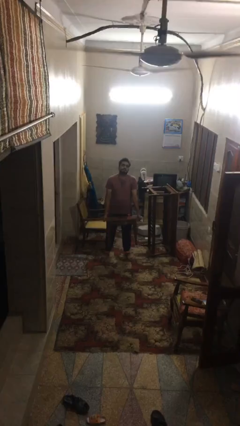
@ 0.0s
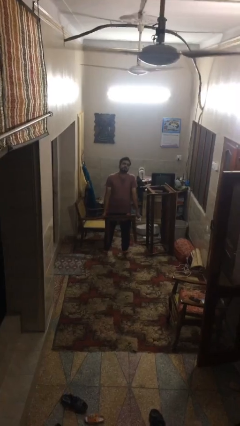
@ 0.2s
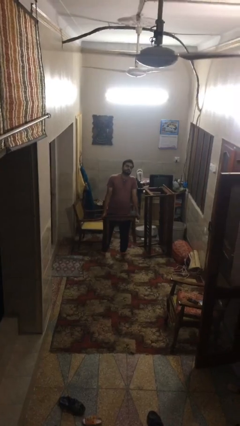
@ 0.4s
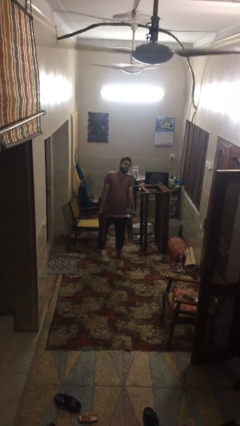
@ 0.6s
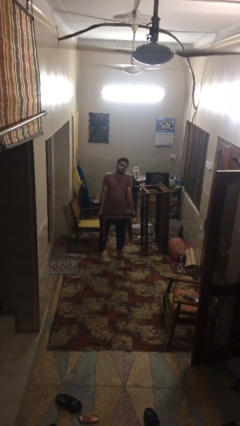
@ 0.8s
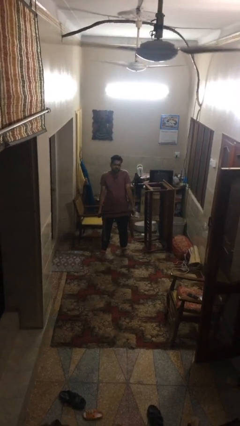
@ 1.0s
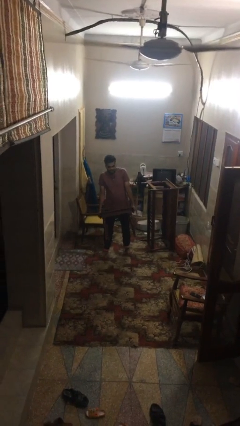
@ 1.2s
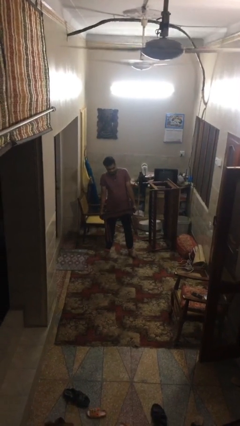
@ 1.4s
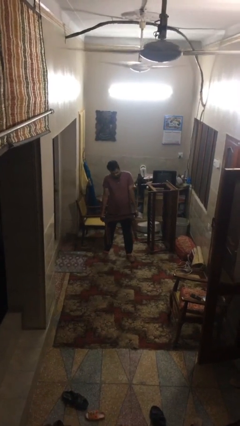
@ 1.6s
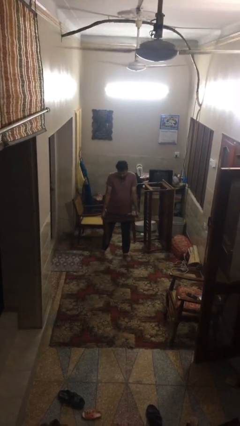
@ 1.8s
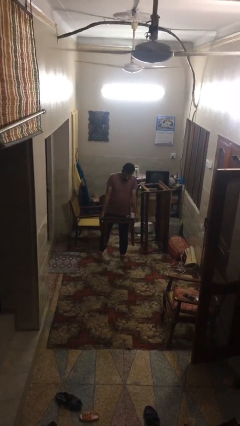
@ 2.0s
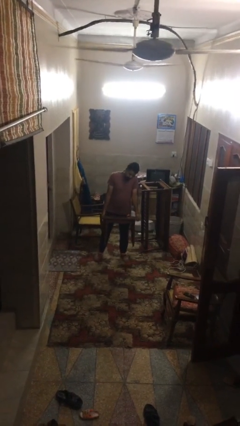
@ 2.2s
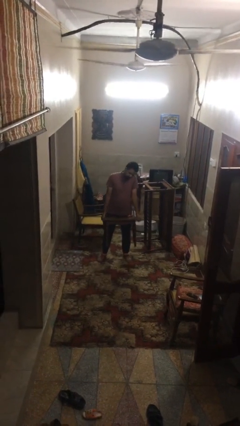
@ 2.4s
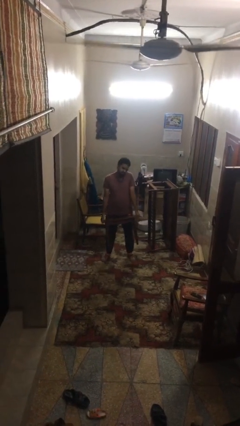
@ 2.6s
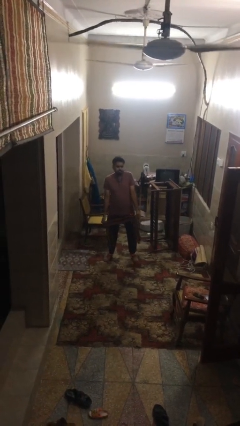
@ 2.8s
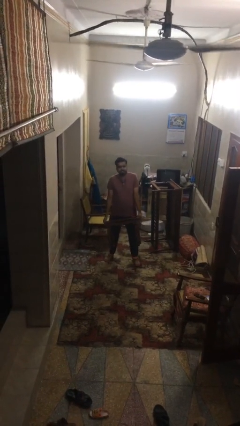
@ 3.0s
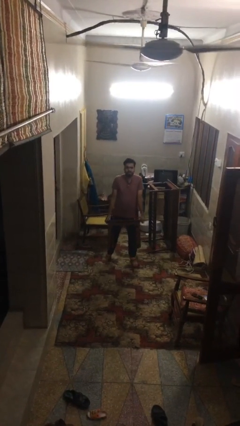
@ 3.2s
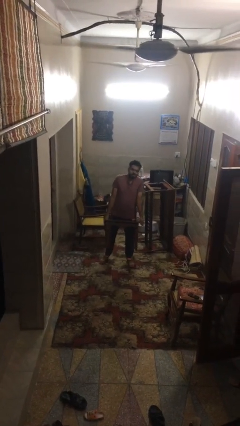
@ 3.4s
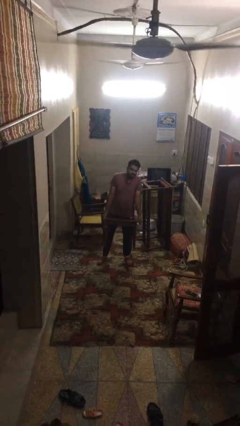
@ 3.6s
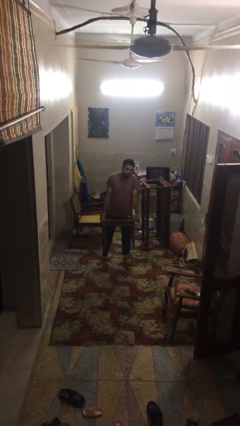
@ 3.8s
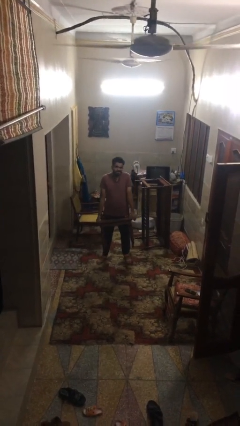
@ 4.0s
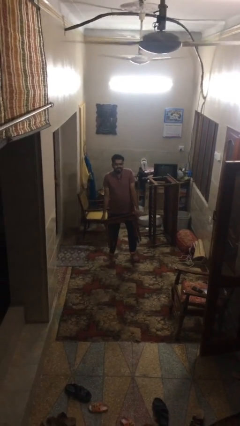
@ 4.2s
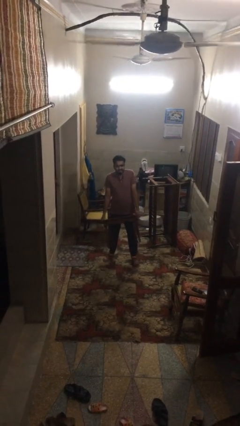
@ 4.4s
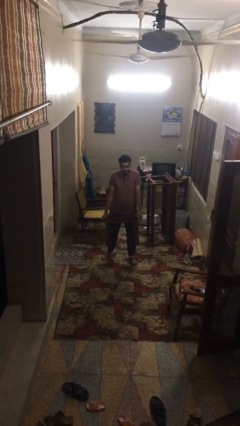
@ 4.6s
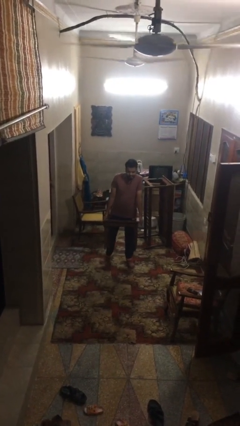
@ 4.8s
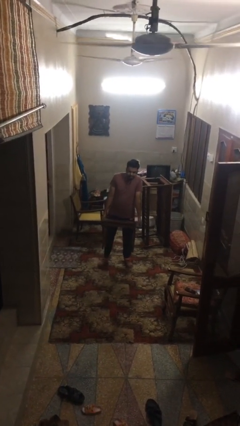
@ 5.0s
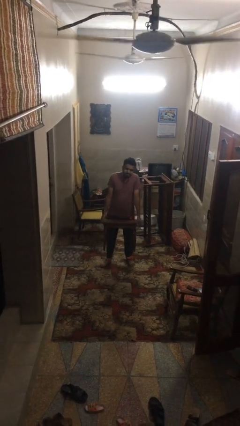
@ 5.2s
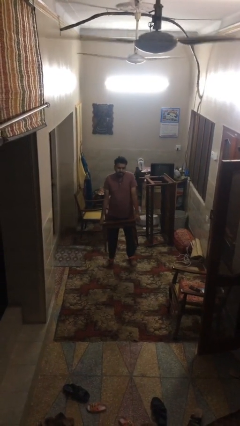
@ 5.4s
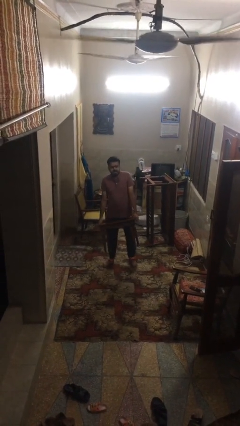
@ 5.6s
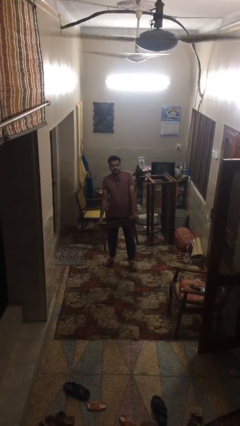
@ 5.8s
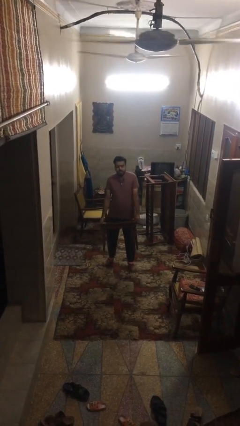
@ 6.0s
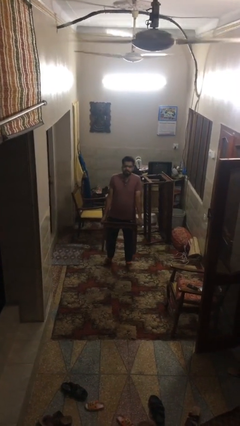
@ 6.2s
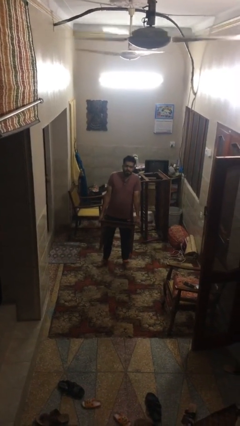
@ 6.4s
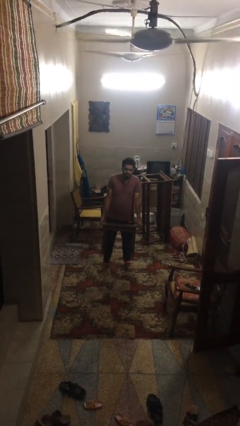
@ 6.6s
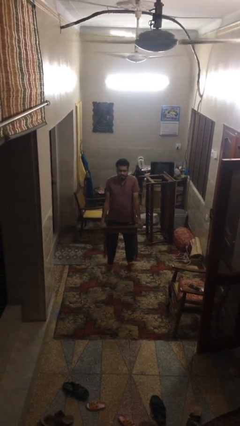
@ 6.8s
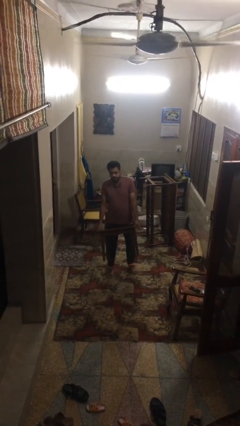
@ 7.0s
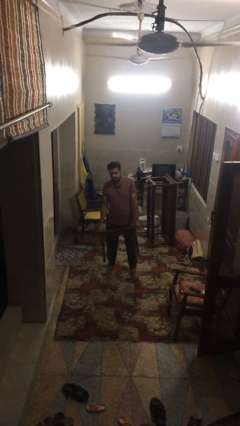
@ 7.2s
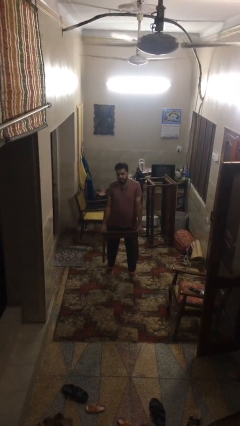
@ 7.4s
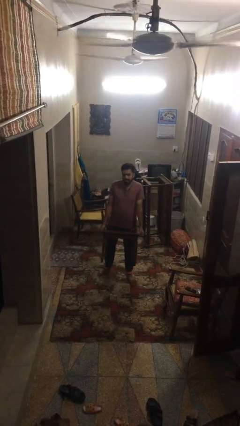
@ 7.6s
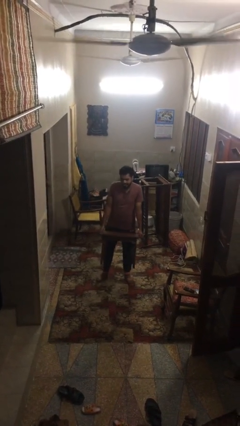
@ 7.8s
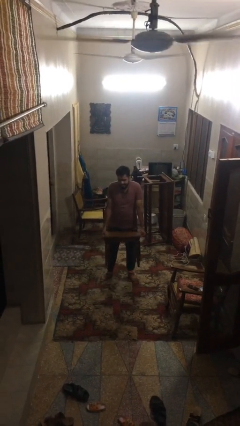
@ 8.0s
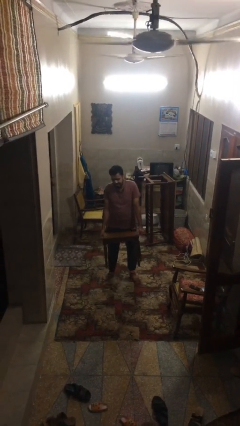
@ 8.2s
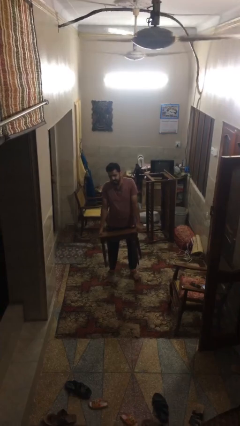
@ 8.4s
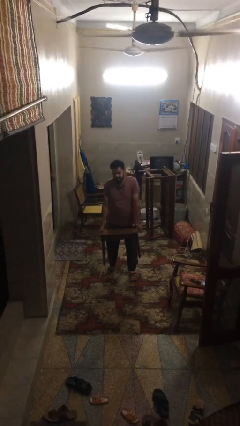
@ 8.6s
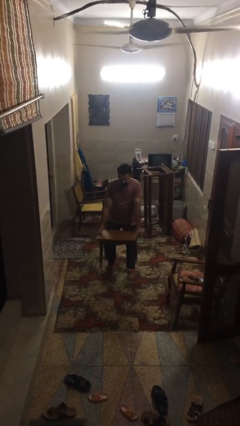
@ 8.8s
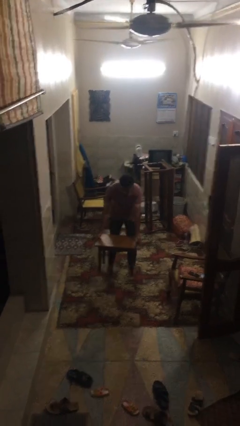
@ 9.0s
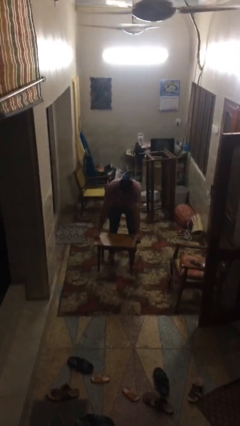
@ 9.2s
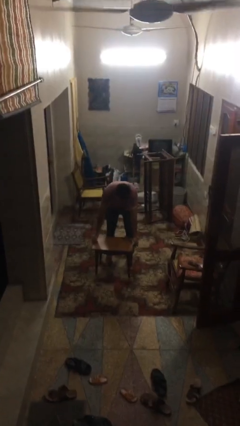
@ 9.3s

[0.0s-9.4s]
person carries heavy object

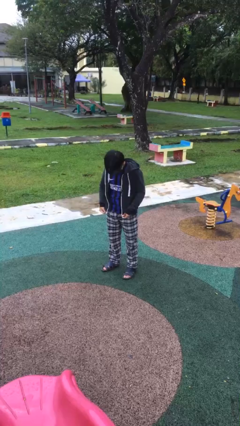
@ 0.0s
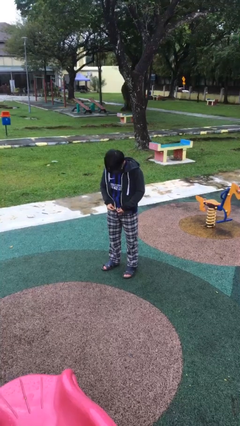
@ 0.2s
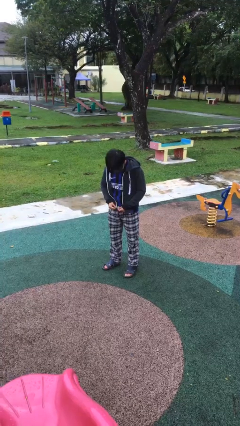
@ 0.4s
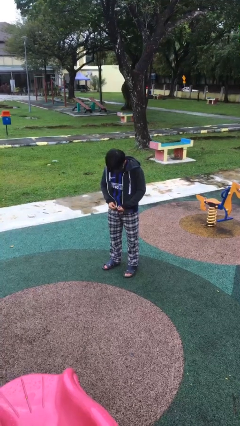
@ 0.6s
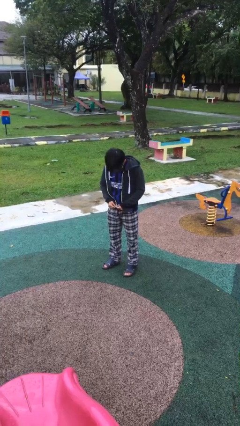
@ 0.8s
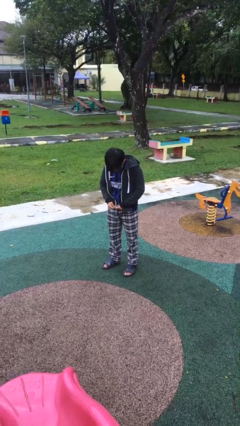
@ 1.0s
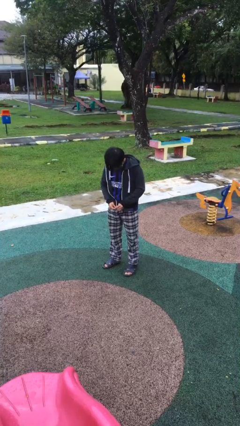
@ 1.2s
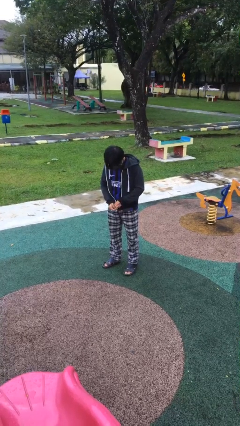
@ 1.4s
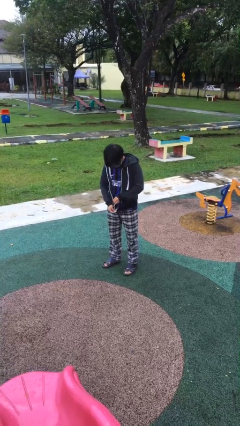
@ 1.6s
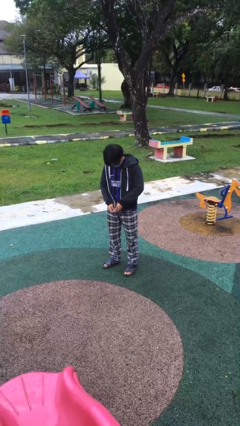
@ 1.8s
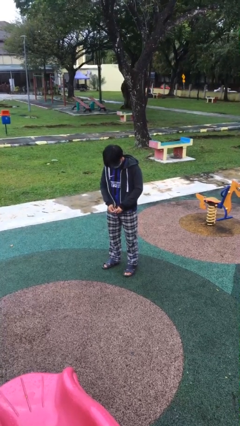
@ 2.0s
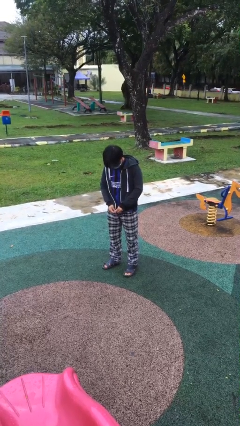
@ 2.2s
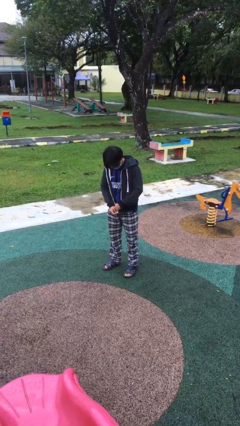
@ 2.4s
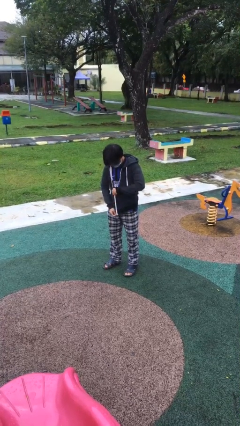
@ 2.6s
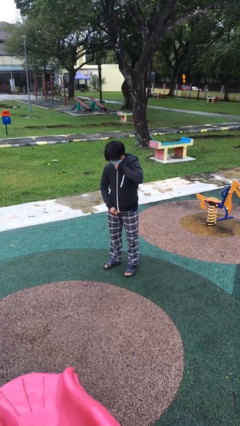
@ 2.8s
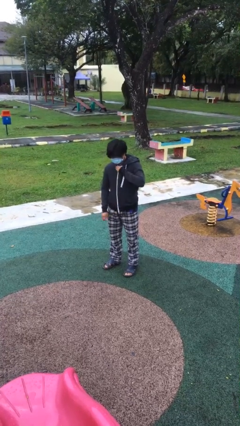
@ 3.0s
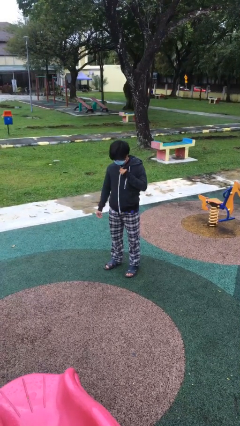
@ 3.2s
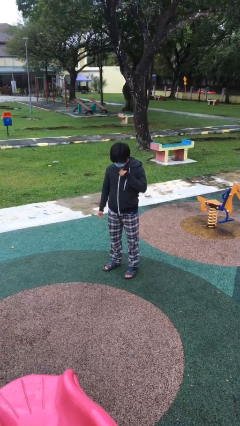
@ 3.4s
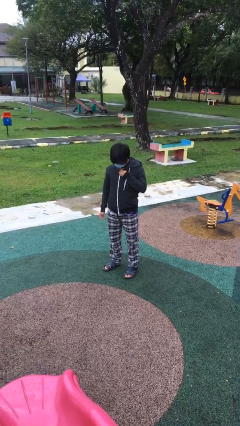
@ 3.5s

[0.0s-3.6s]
person zips up jacket

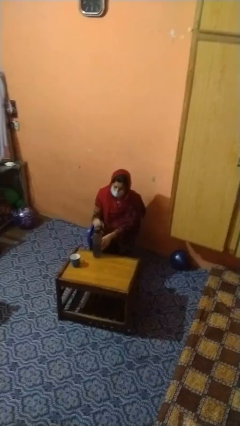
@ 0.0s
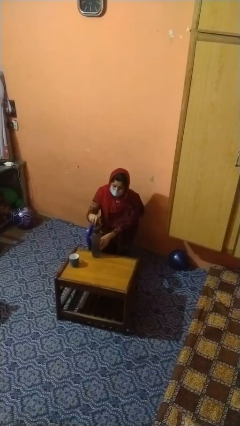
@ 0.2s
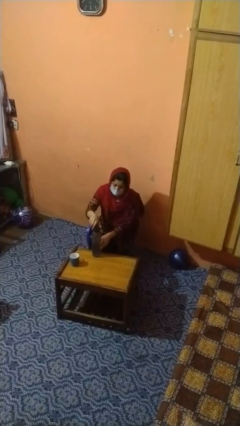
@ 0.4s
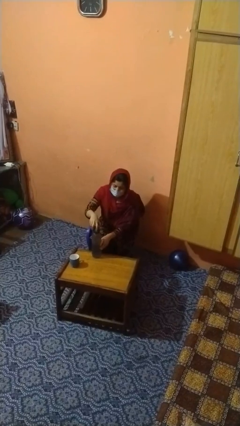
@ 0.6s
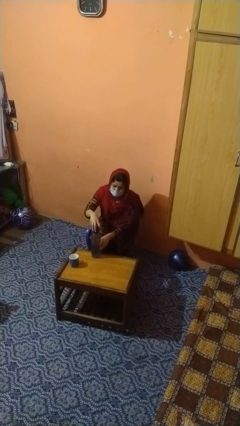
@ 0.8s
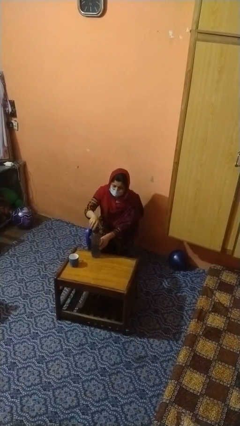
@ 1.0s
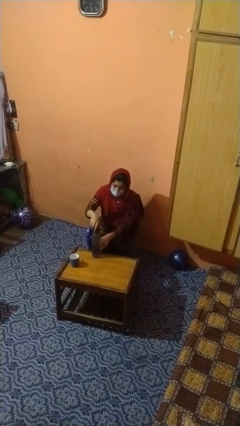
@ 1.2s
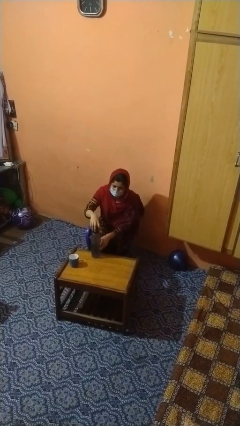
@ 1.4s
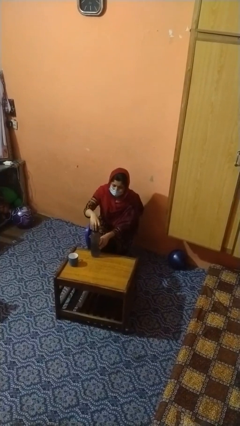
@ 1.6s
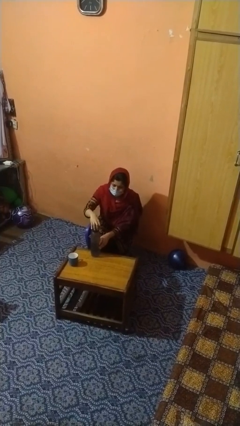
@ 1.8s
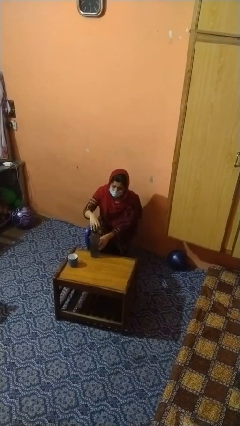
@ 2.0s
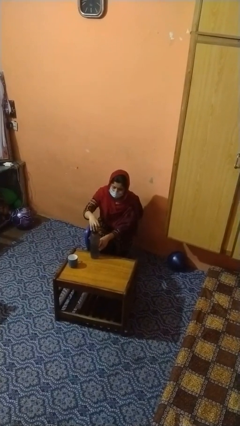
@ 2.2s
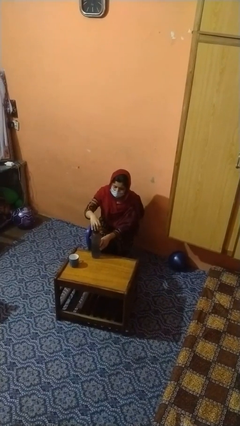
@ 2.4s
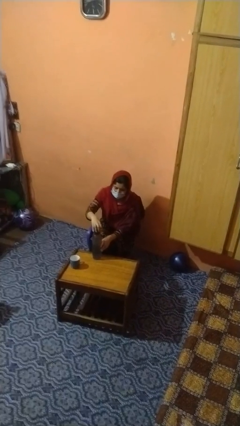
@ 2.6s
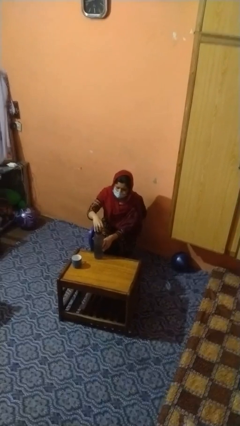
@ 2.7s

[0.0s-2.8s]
person unscrews lid from bottle

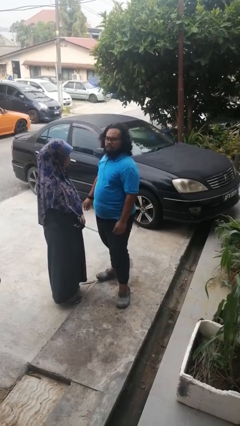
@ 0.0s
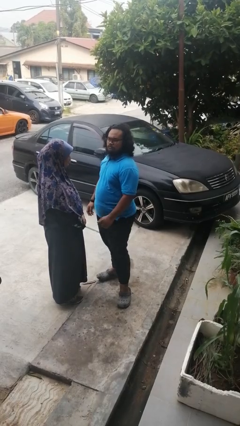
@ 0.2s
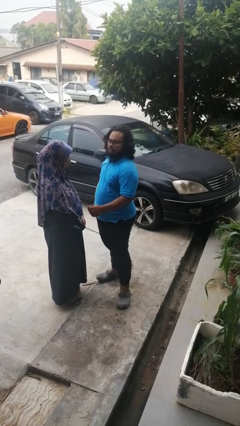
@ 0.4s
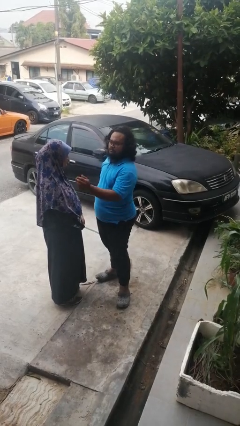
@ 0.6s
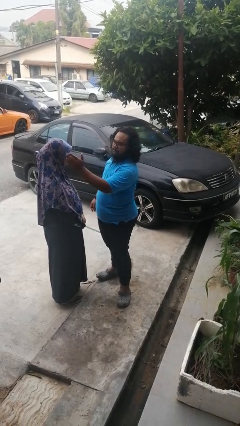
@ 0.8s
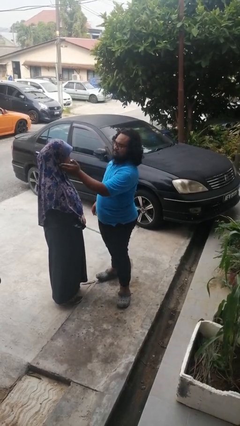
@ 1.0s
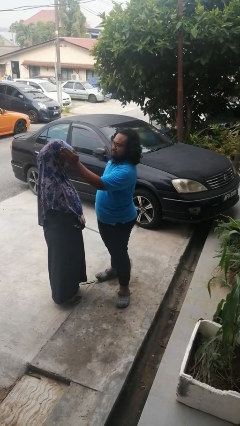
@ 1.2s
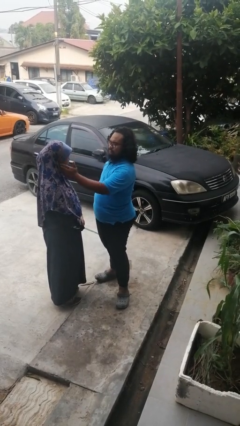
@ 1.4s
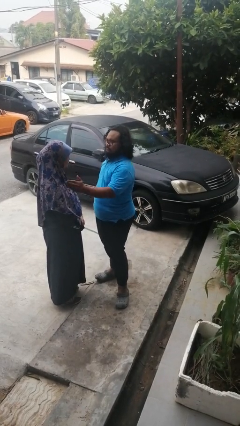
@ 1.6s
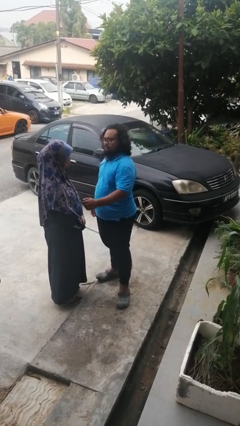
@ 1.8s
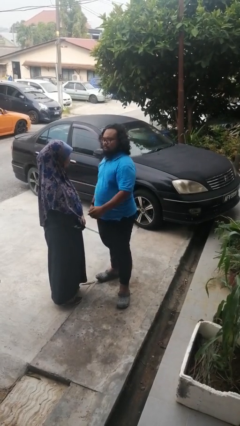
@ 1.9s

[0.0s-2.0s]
person touches face of person

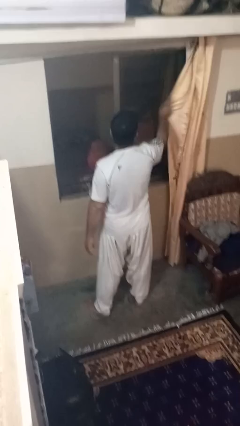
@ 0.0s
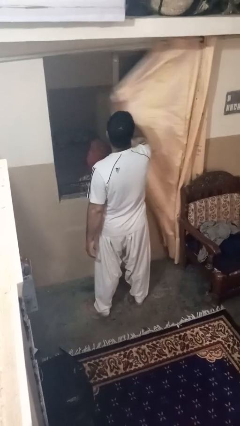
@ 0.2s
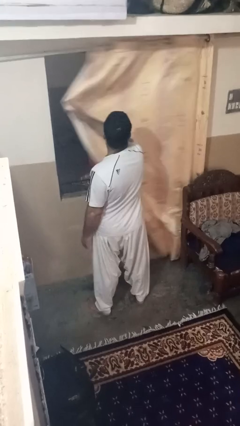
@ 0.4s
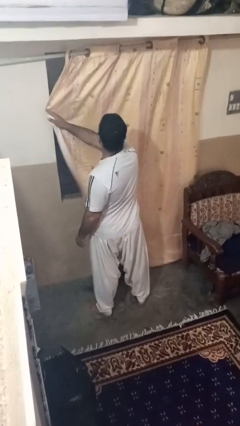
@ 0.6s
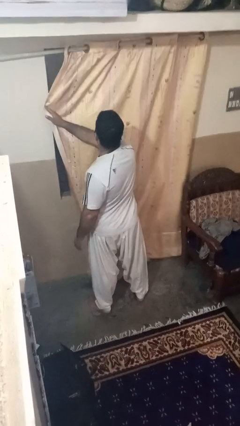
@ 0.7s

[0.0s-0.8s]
person closes curtains
